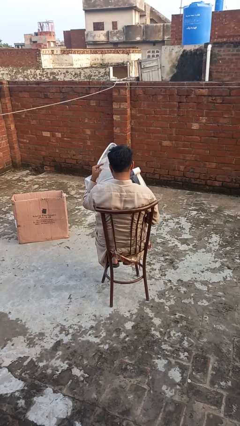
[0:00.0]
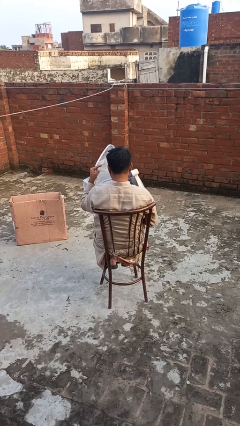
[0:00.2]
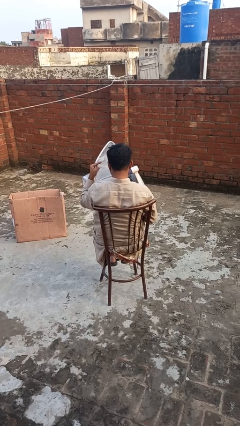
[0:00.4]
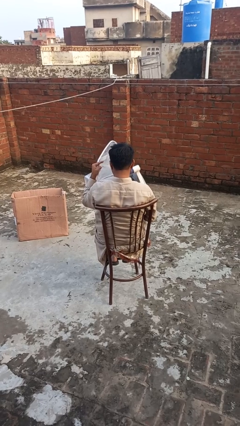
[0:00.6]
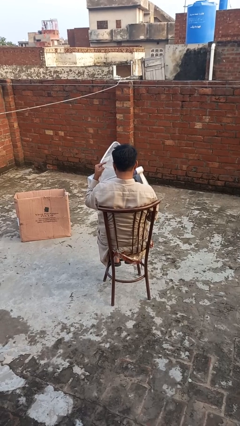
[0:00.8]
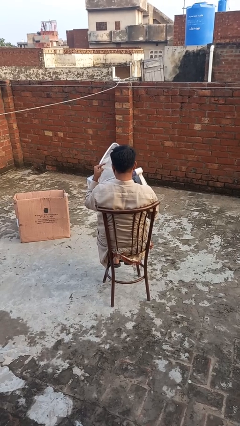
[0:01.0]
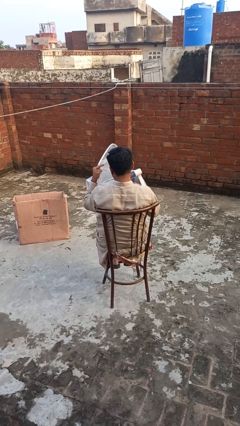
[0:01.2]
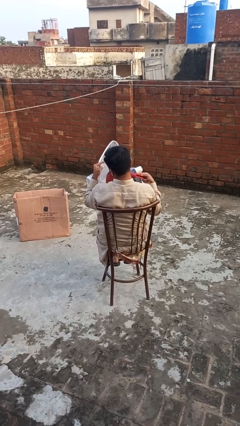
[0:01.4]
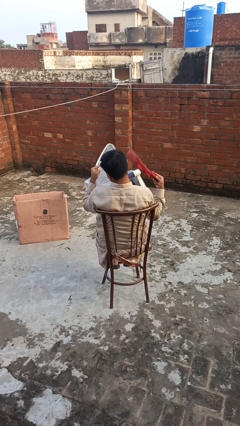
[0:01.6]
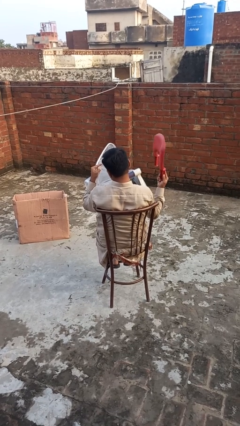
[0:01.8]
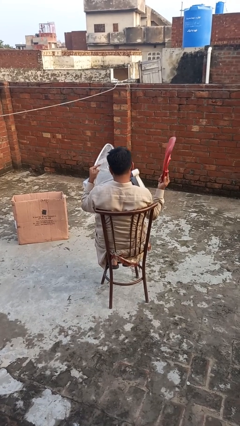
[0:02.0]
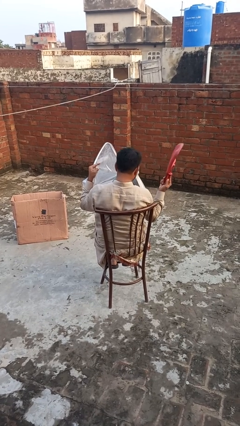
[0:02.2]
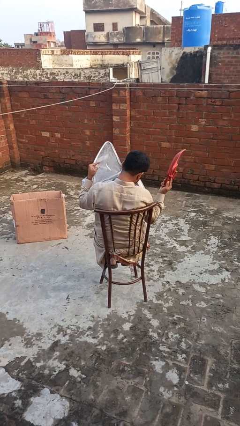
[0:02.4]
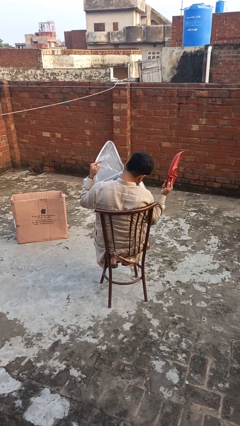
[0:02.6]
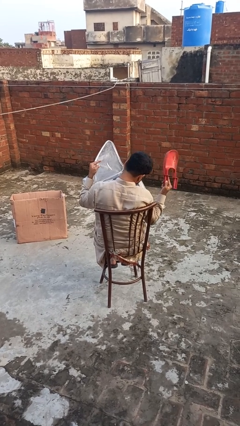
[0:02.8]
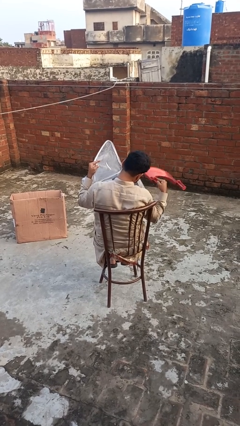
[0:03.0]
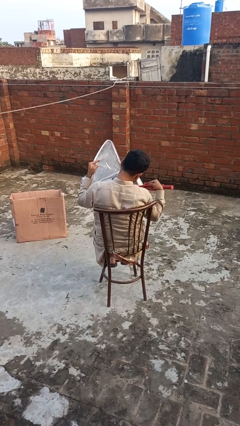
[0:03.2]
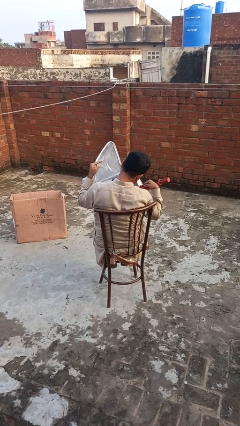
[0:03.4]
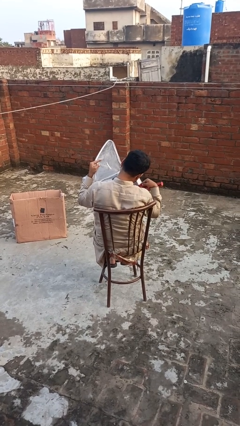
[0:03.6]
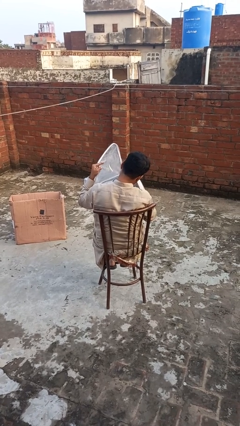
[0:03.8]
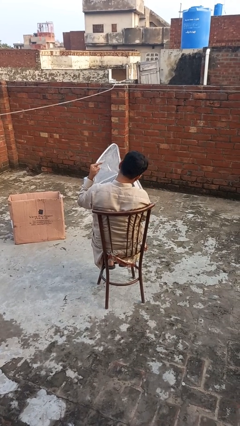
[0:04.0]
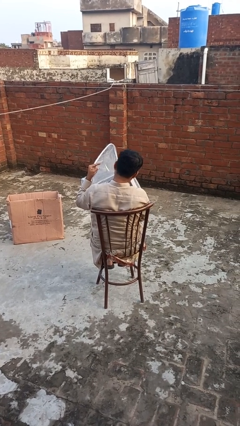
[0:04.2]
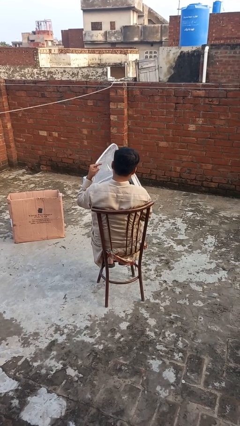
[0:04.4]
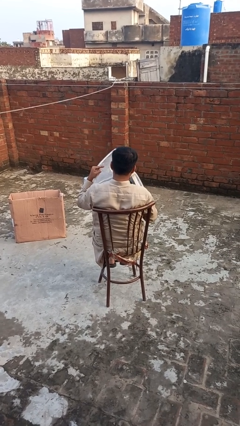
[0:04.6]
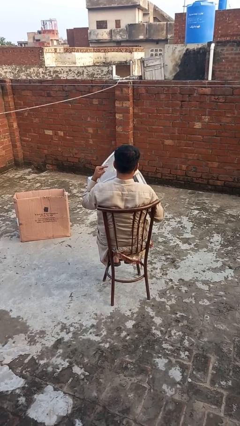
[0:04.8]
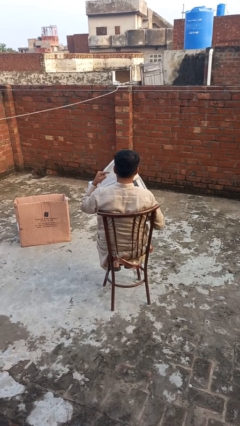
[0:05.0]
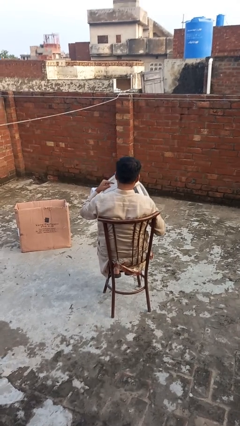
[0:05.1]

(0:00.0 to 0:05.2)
person searches in bag

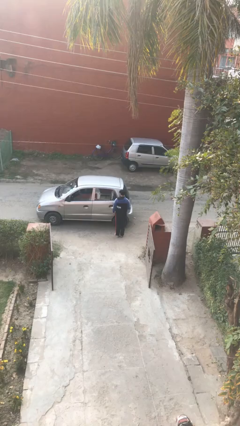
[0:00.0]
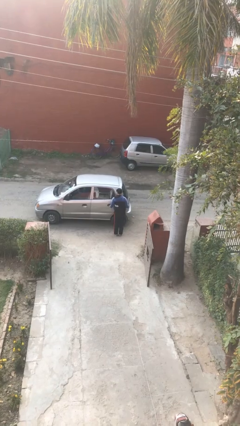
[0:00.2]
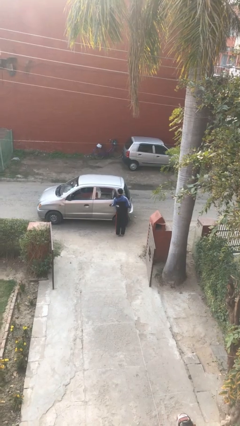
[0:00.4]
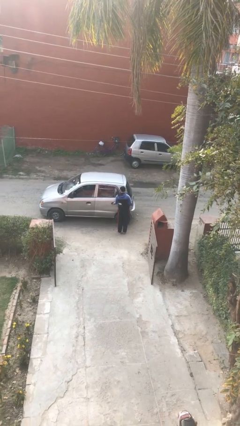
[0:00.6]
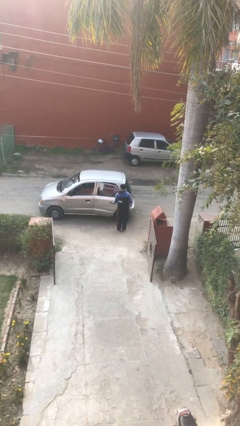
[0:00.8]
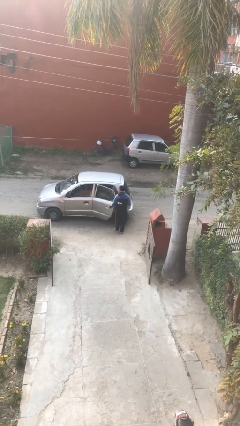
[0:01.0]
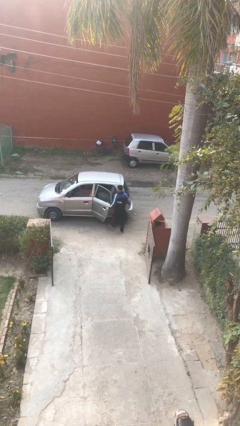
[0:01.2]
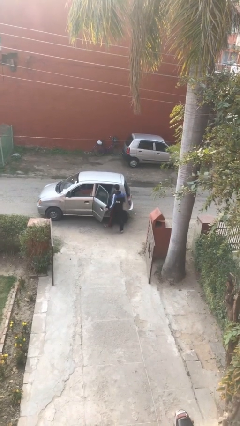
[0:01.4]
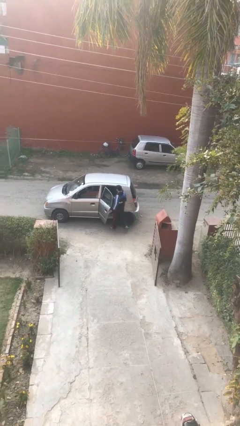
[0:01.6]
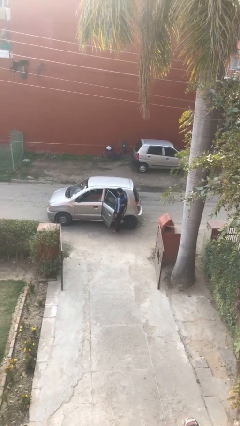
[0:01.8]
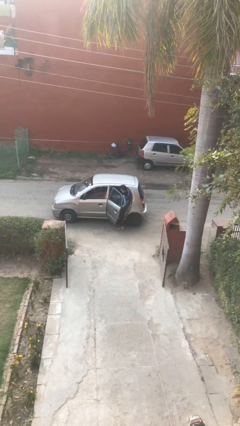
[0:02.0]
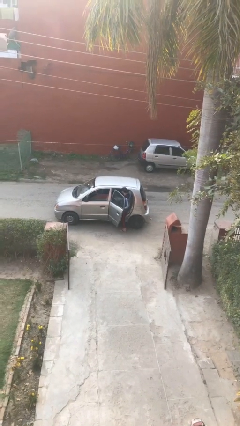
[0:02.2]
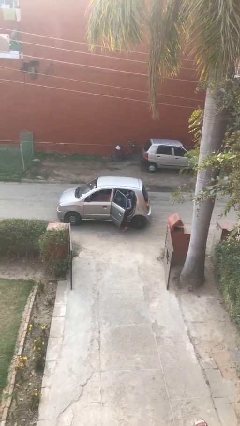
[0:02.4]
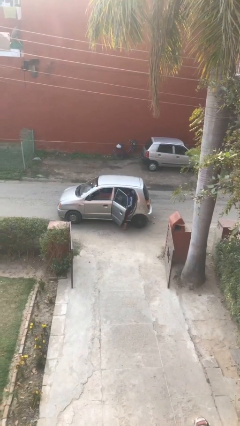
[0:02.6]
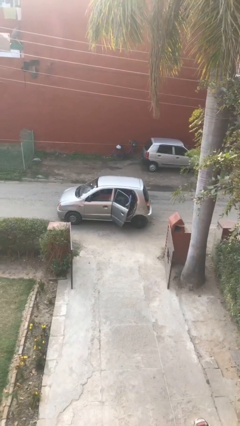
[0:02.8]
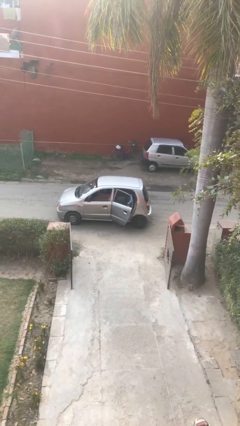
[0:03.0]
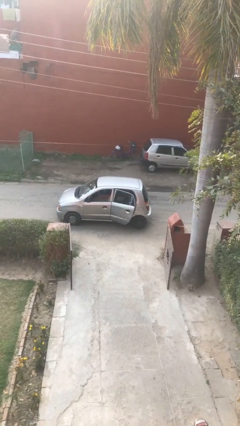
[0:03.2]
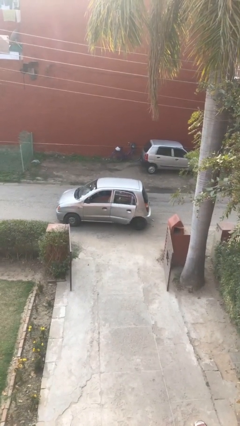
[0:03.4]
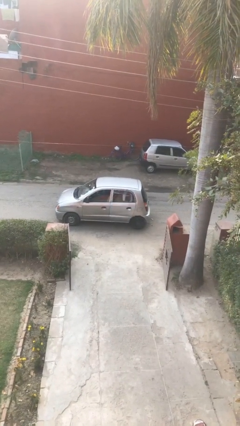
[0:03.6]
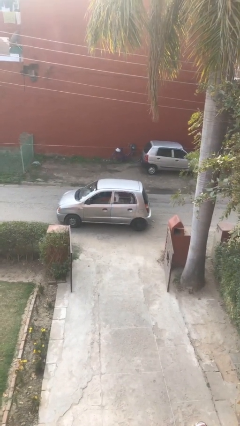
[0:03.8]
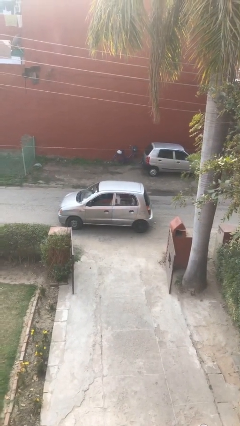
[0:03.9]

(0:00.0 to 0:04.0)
car picks up person

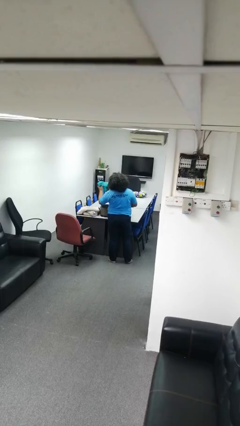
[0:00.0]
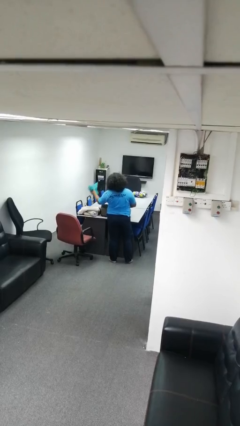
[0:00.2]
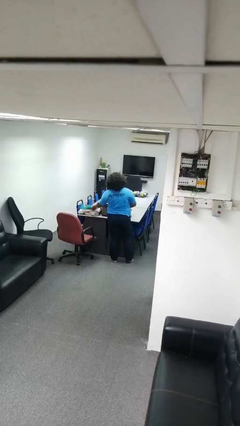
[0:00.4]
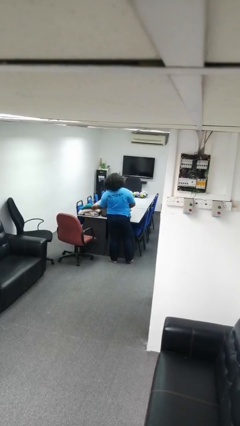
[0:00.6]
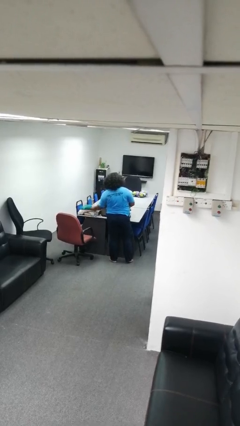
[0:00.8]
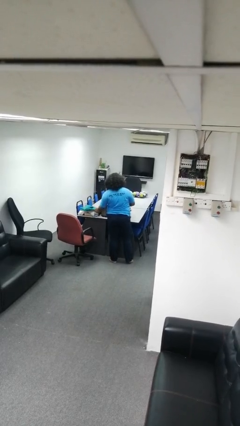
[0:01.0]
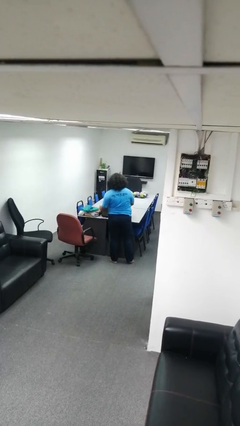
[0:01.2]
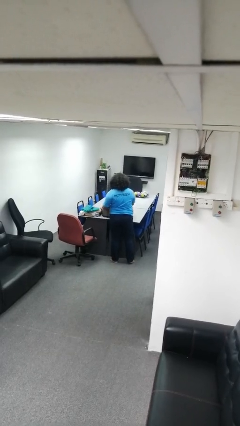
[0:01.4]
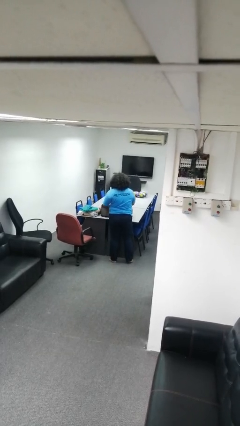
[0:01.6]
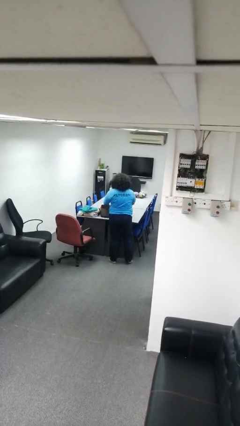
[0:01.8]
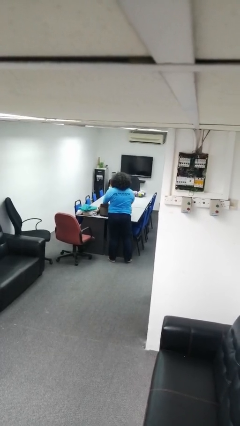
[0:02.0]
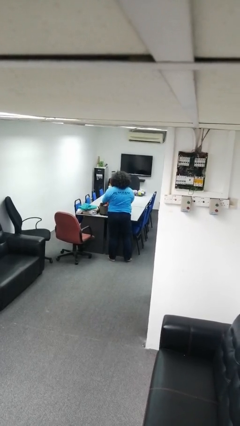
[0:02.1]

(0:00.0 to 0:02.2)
person unloads clothes from suitcase

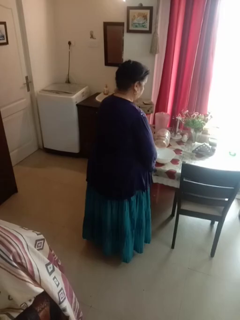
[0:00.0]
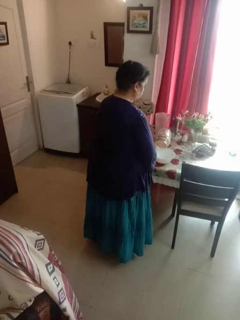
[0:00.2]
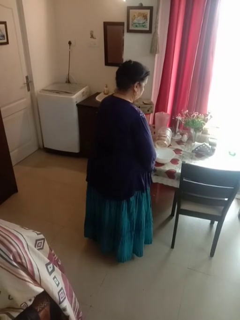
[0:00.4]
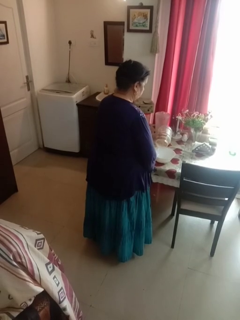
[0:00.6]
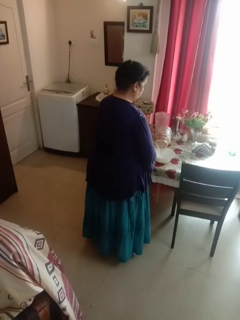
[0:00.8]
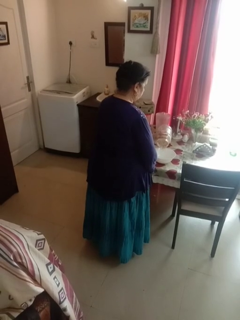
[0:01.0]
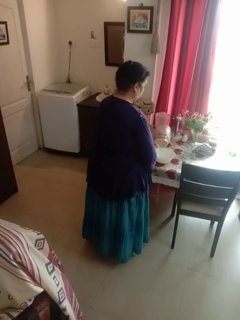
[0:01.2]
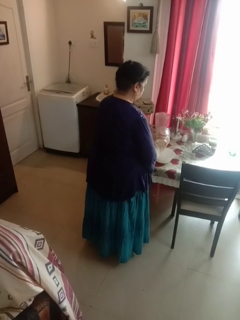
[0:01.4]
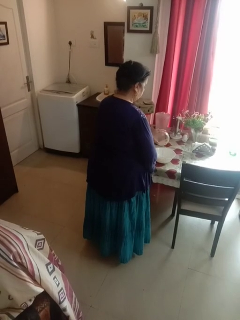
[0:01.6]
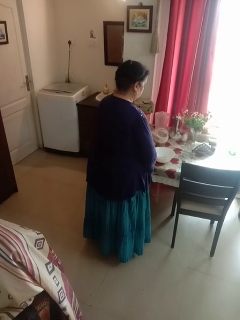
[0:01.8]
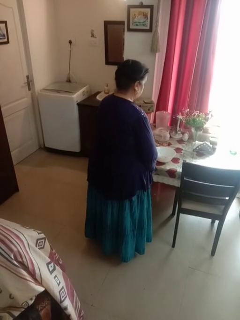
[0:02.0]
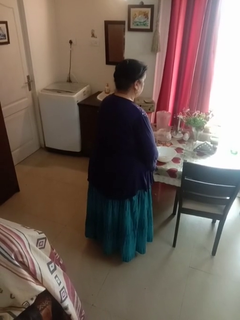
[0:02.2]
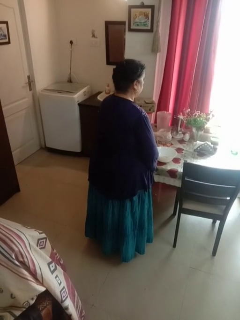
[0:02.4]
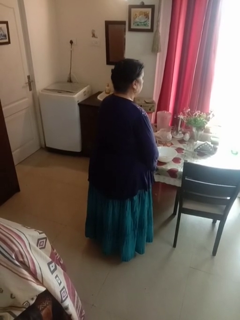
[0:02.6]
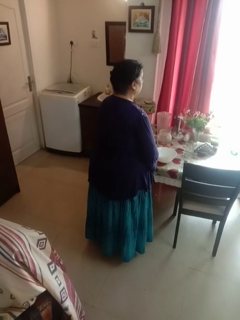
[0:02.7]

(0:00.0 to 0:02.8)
person pours into bowl

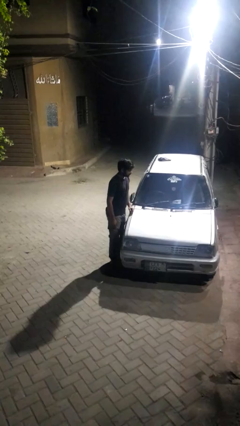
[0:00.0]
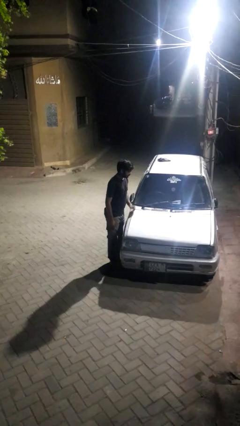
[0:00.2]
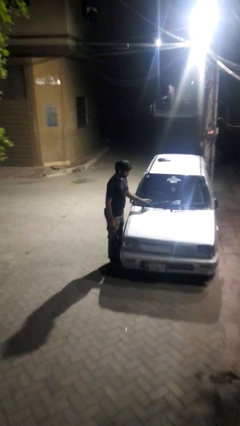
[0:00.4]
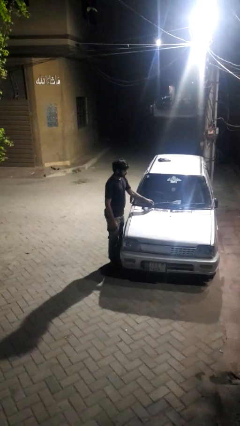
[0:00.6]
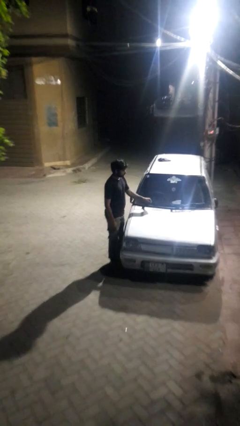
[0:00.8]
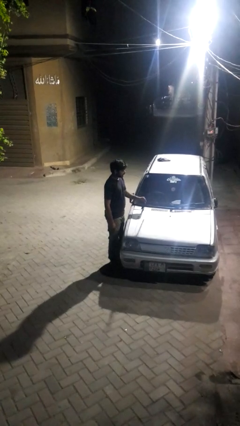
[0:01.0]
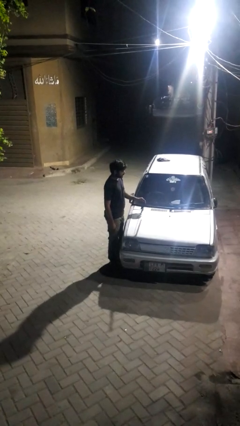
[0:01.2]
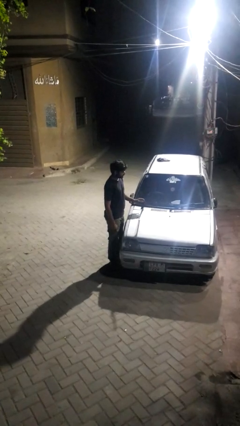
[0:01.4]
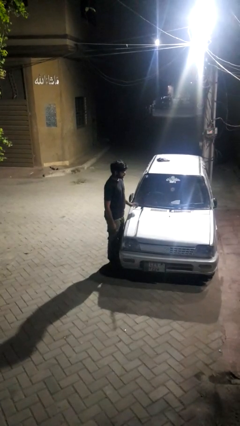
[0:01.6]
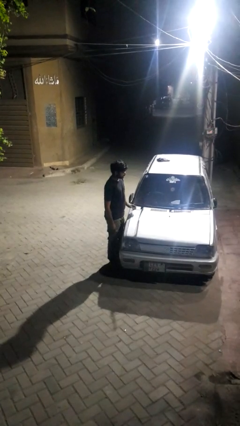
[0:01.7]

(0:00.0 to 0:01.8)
person flips up car wipers

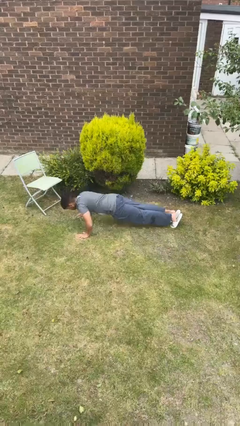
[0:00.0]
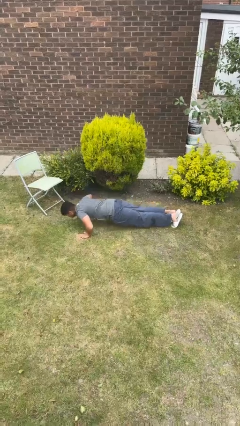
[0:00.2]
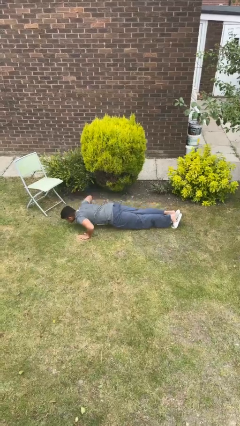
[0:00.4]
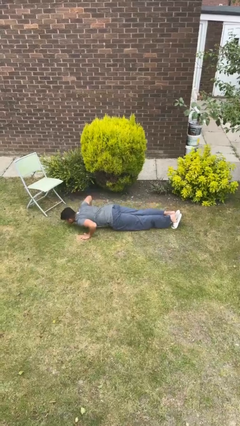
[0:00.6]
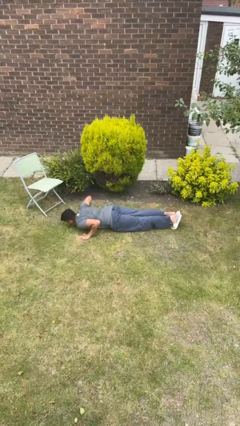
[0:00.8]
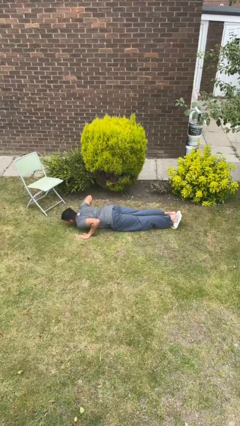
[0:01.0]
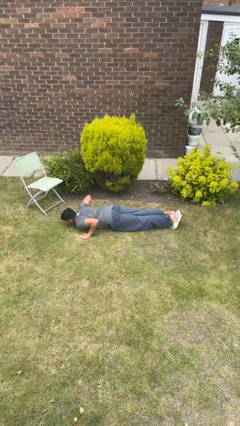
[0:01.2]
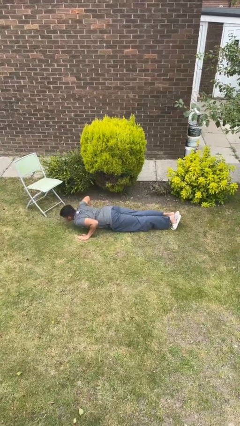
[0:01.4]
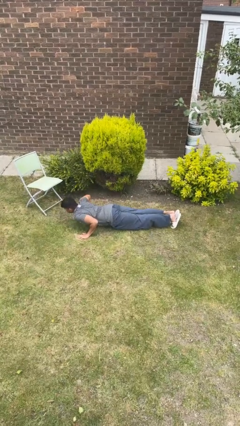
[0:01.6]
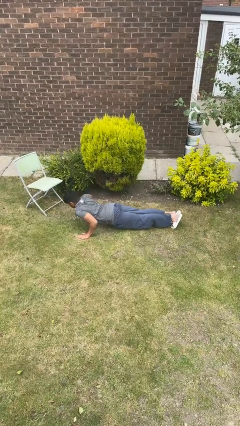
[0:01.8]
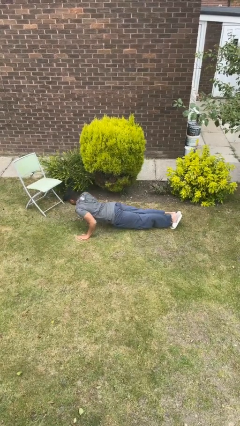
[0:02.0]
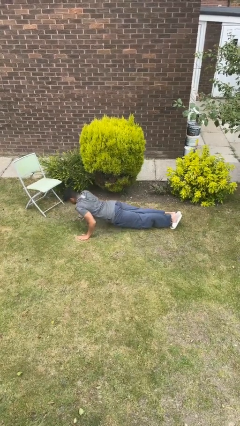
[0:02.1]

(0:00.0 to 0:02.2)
person exercises with pushup
